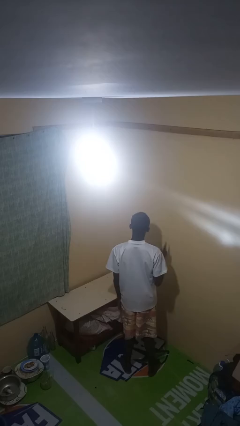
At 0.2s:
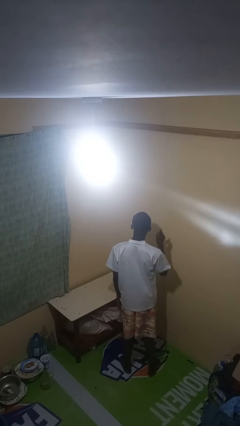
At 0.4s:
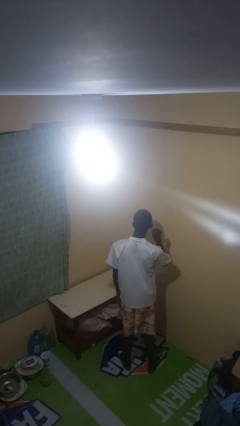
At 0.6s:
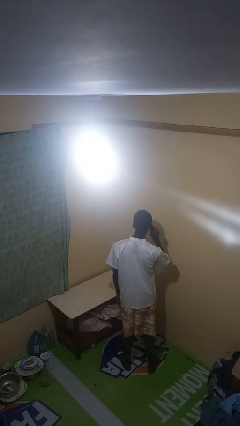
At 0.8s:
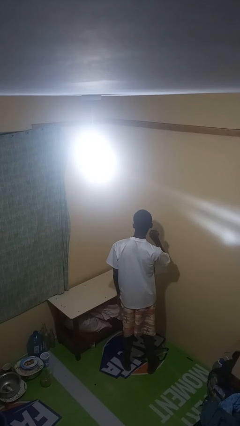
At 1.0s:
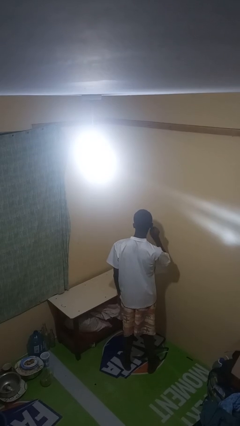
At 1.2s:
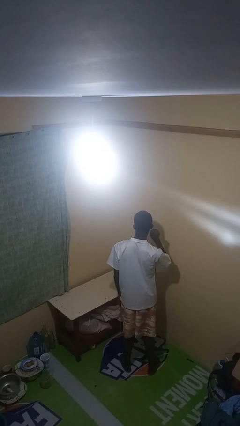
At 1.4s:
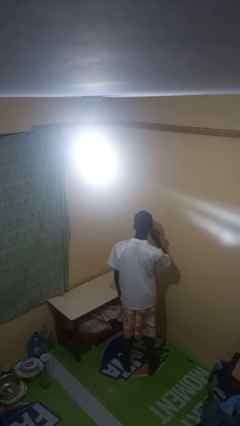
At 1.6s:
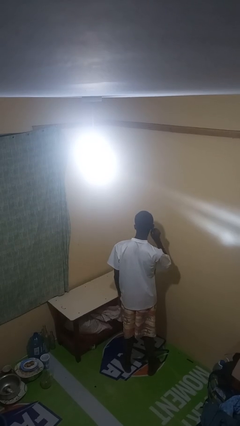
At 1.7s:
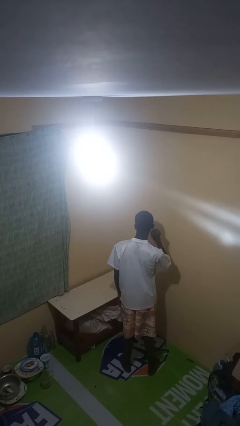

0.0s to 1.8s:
person gestures listen closely

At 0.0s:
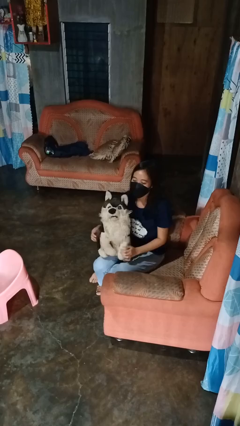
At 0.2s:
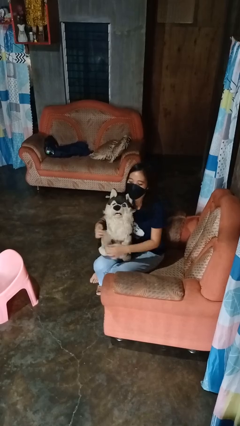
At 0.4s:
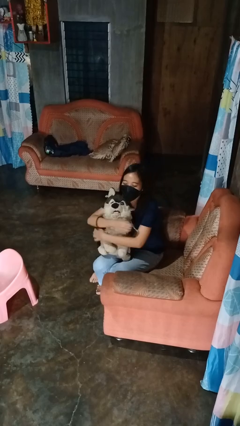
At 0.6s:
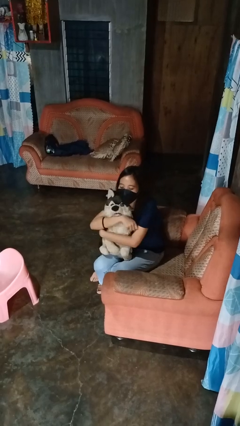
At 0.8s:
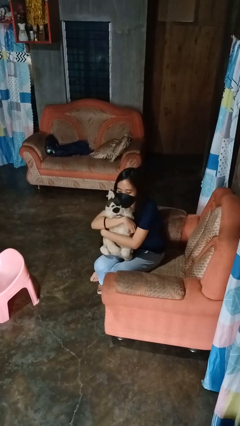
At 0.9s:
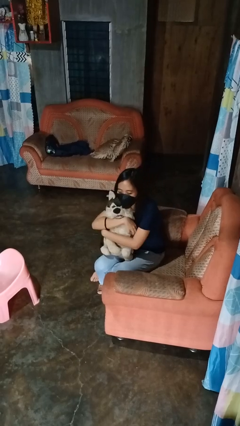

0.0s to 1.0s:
person hugs stuffed animal

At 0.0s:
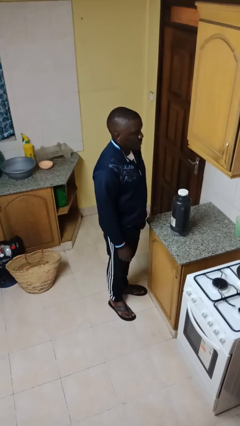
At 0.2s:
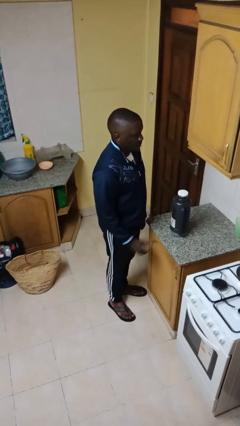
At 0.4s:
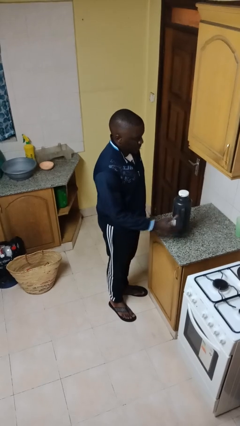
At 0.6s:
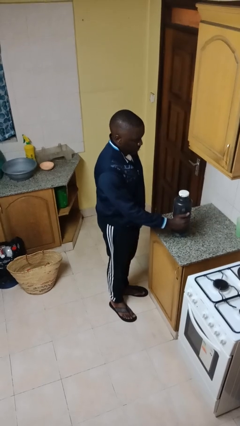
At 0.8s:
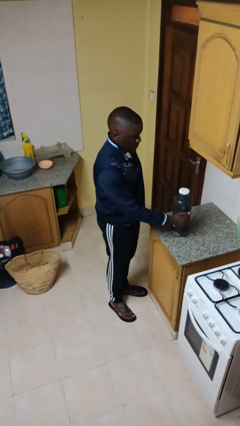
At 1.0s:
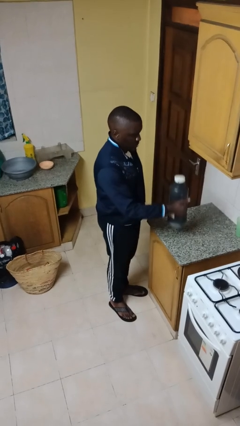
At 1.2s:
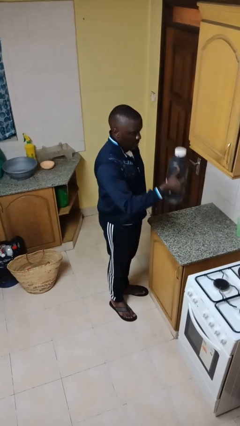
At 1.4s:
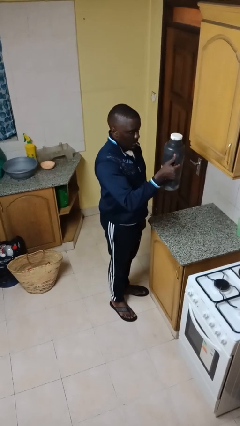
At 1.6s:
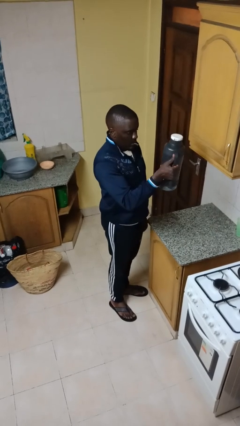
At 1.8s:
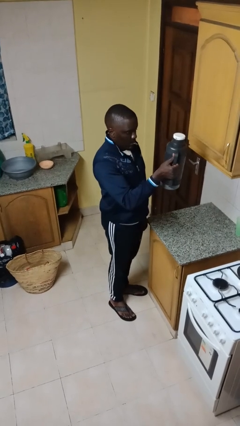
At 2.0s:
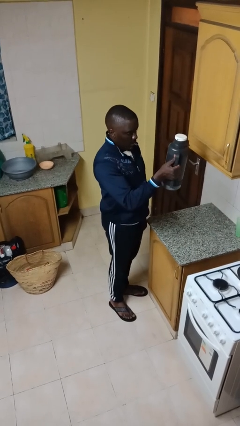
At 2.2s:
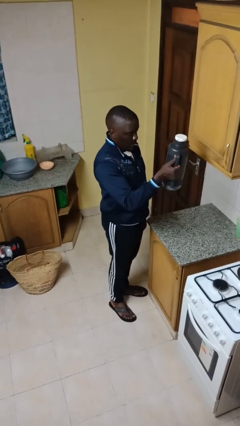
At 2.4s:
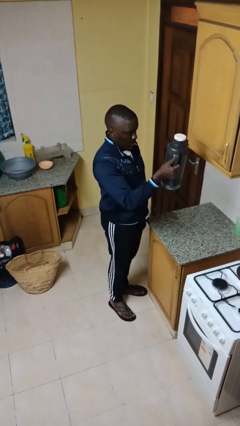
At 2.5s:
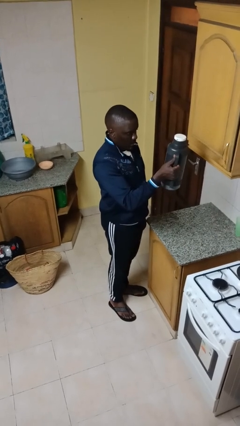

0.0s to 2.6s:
person picks up object from countertop

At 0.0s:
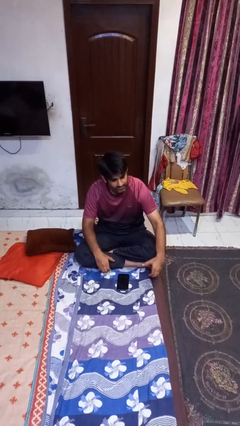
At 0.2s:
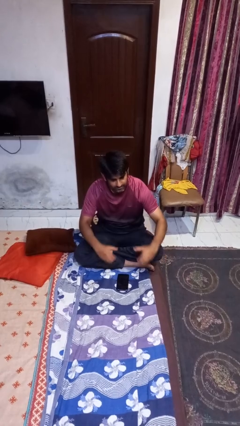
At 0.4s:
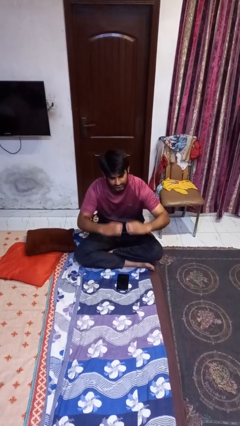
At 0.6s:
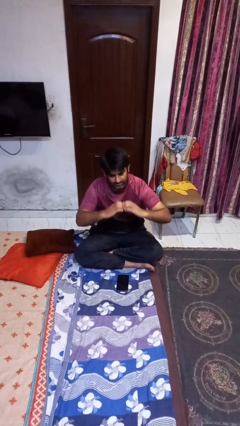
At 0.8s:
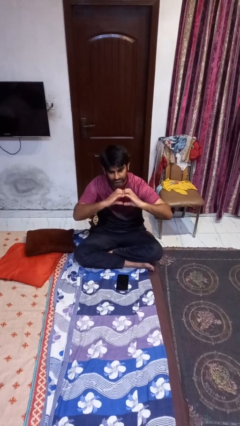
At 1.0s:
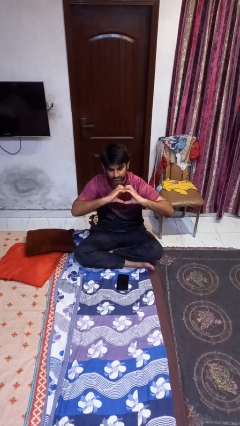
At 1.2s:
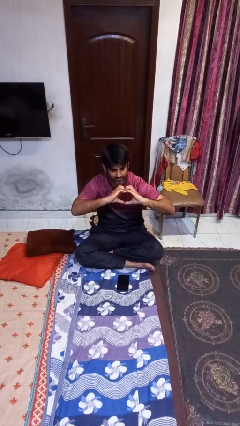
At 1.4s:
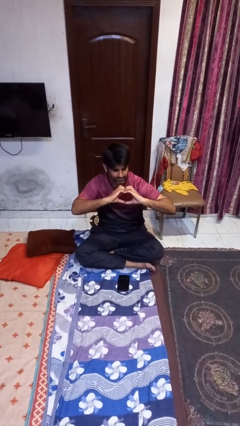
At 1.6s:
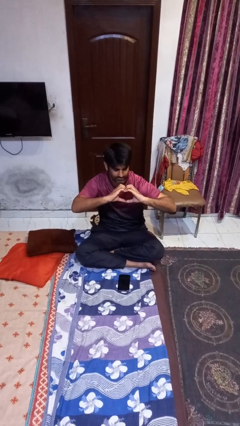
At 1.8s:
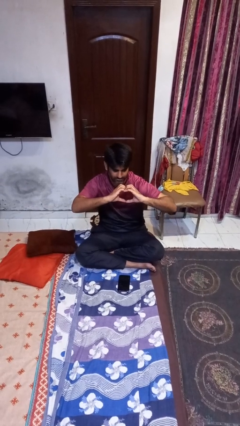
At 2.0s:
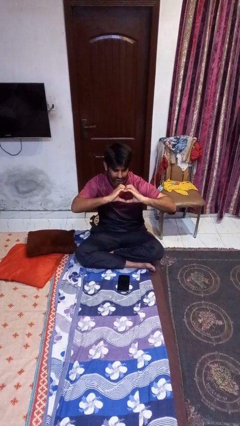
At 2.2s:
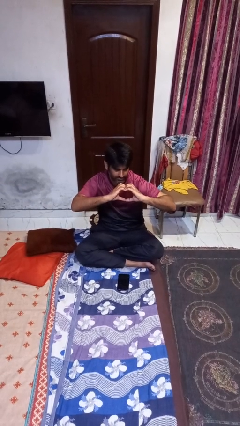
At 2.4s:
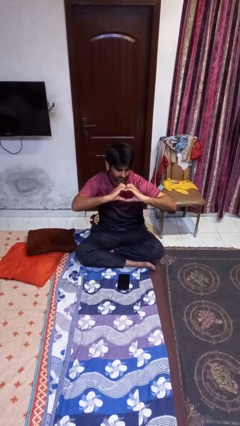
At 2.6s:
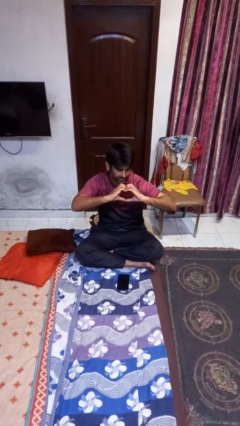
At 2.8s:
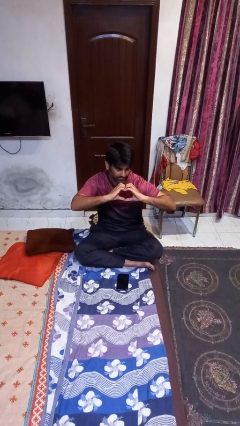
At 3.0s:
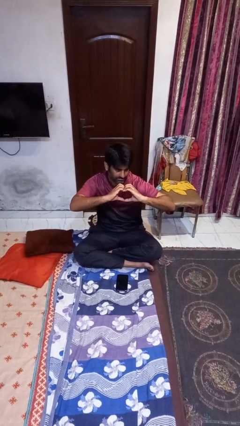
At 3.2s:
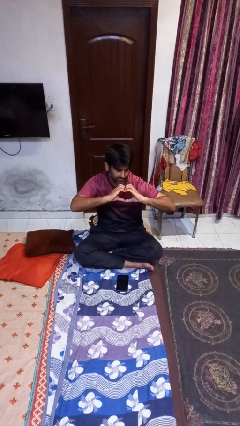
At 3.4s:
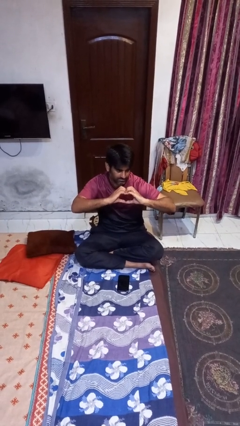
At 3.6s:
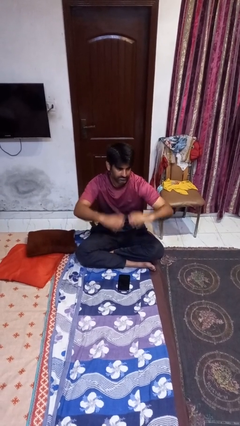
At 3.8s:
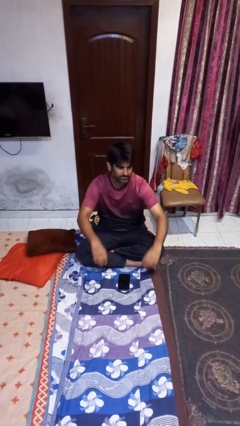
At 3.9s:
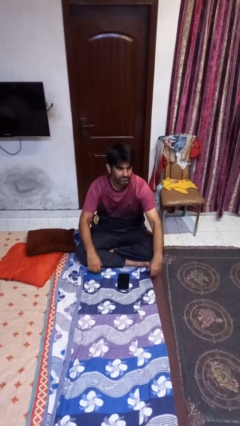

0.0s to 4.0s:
person gestures heart

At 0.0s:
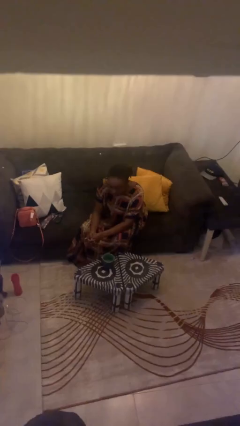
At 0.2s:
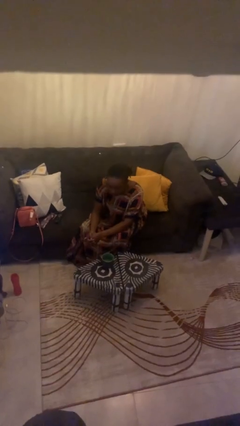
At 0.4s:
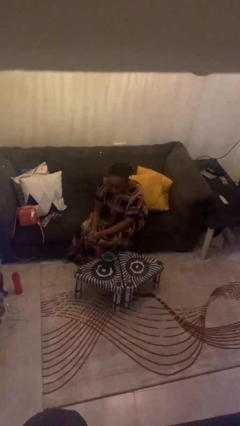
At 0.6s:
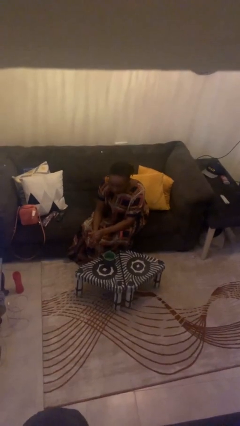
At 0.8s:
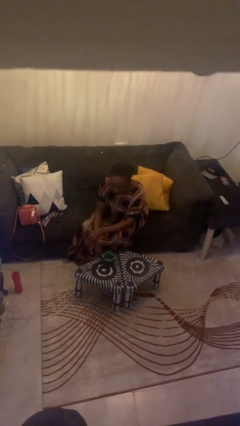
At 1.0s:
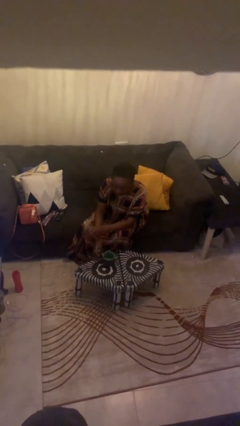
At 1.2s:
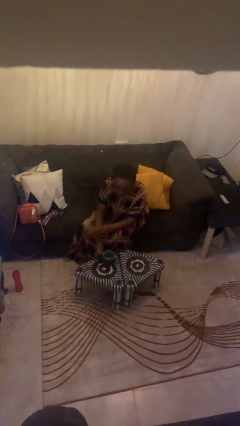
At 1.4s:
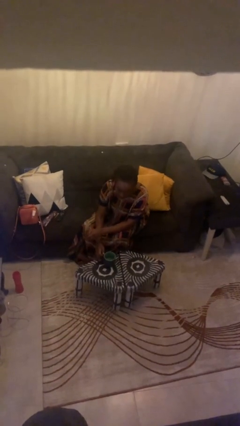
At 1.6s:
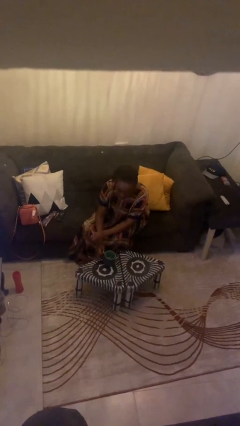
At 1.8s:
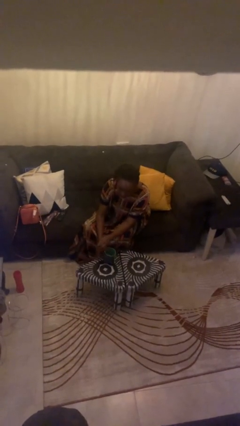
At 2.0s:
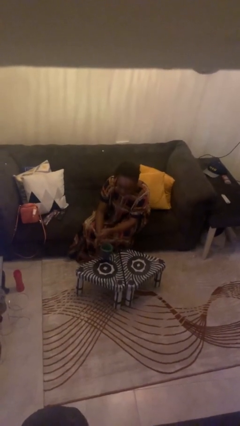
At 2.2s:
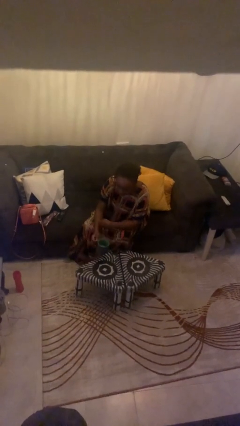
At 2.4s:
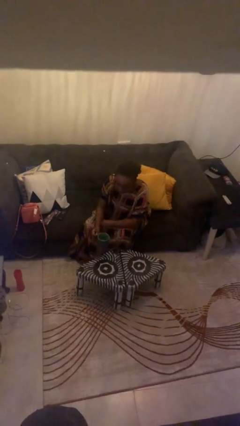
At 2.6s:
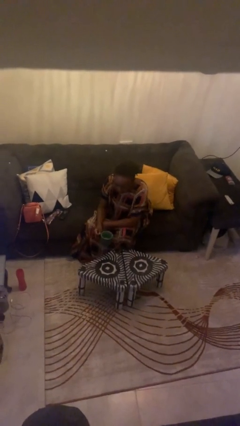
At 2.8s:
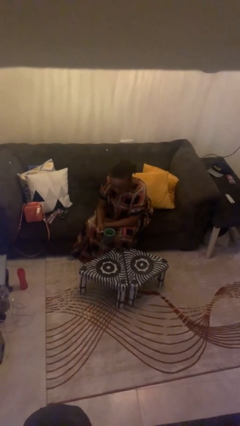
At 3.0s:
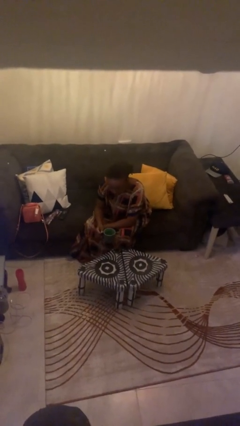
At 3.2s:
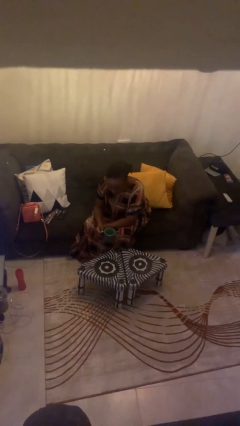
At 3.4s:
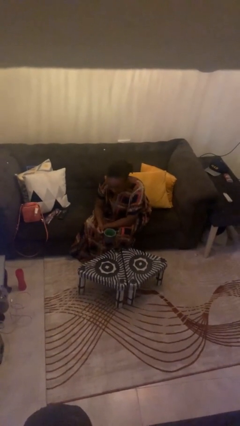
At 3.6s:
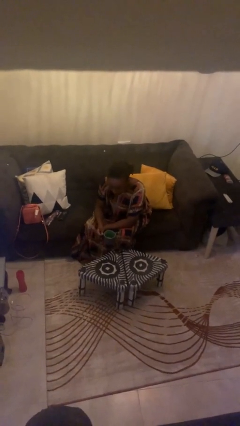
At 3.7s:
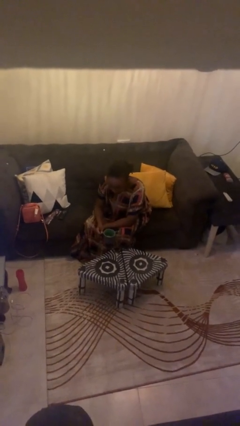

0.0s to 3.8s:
person picks up object from table

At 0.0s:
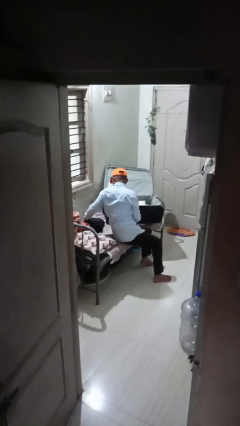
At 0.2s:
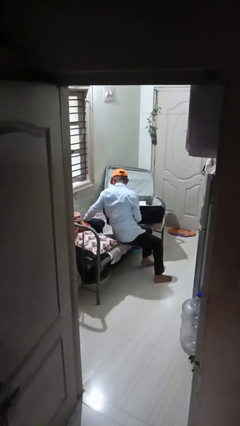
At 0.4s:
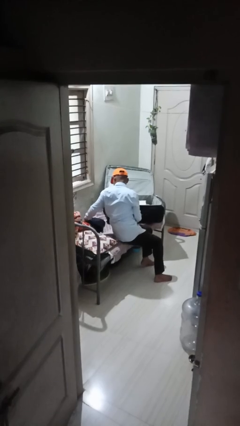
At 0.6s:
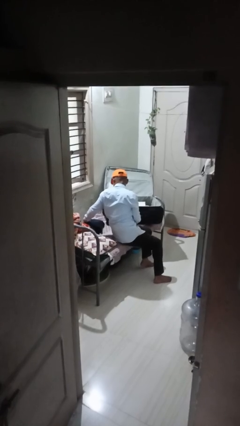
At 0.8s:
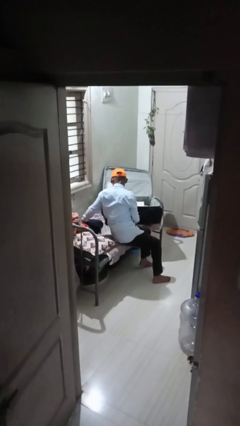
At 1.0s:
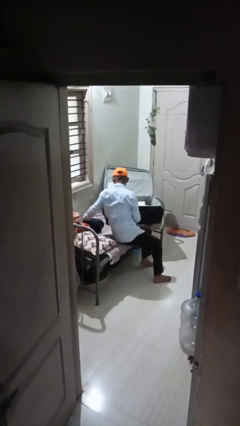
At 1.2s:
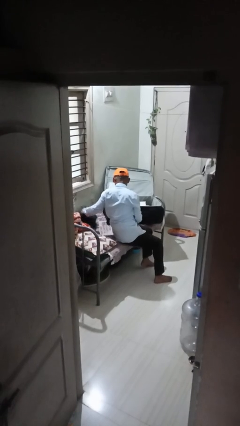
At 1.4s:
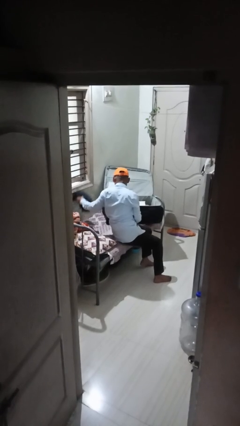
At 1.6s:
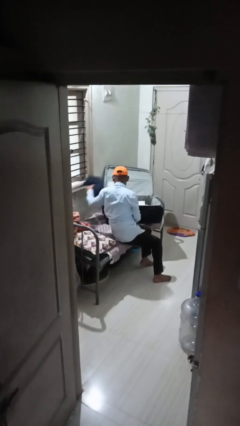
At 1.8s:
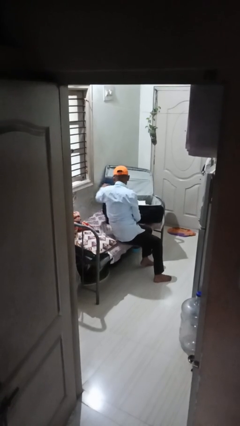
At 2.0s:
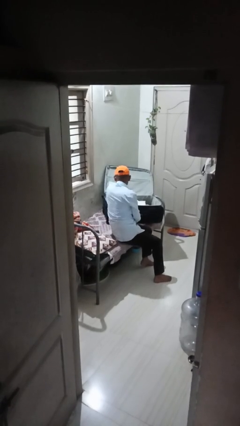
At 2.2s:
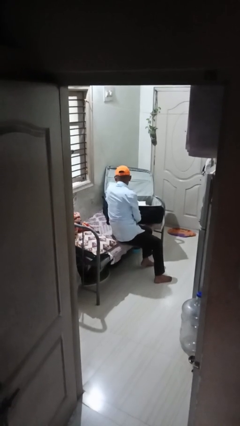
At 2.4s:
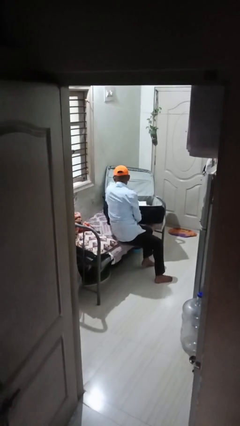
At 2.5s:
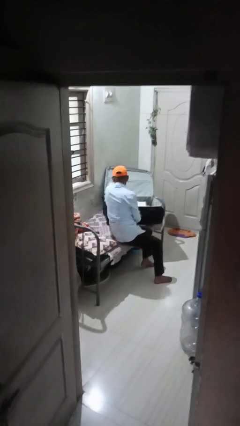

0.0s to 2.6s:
person loads clothes into suitcase

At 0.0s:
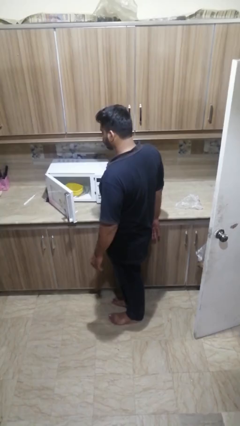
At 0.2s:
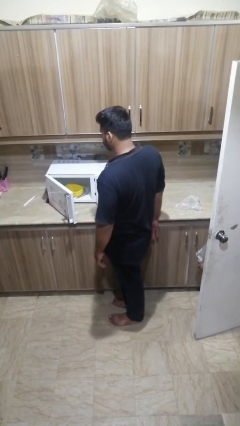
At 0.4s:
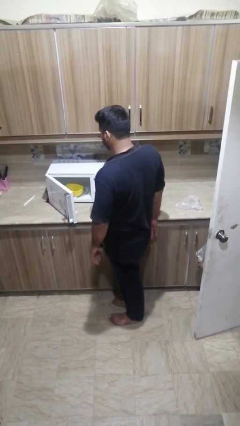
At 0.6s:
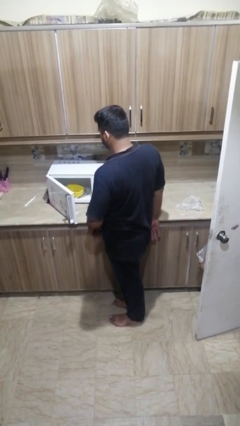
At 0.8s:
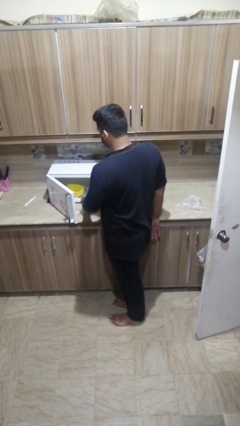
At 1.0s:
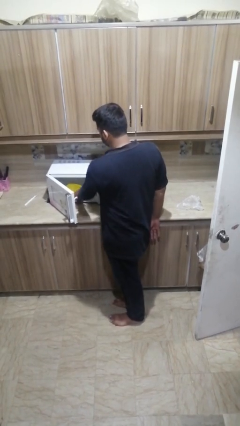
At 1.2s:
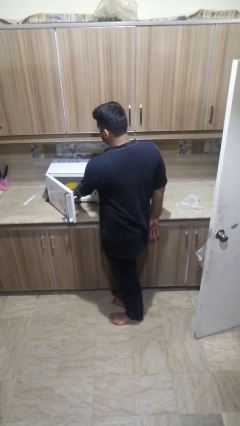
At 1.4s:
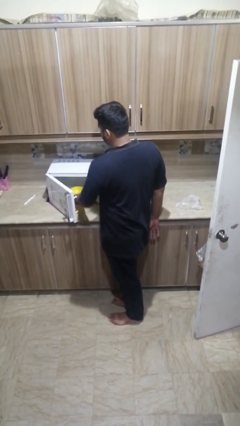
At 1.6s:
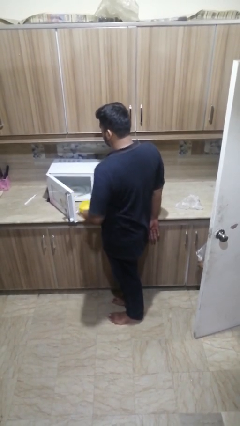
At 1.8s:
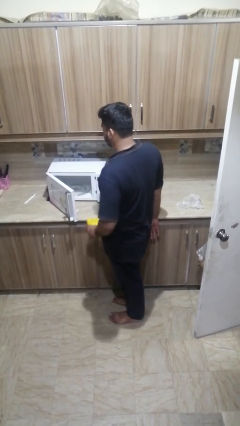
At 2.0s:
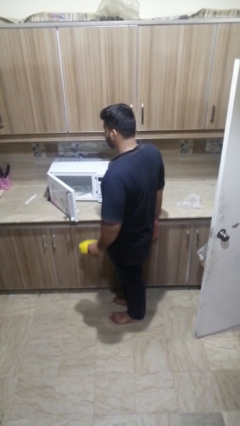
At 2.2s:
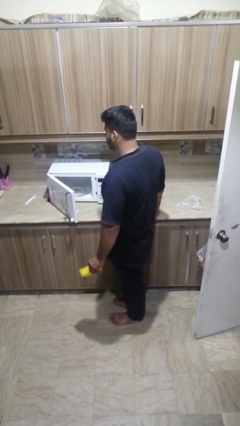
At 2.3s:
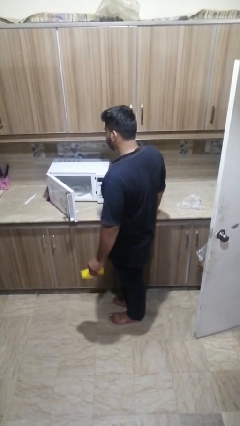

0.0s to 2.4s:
person takes object from microwave
